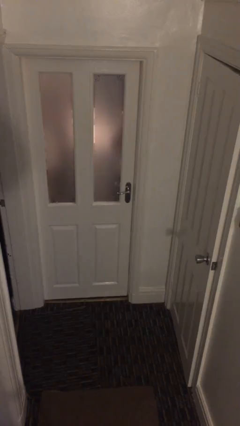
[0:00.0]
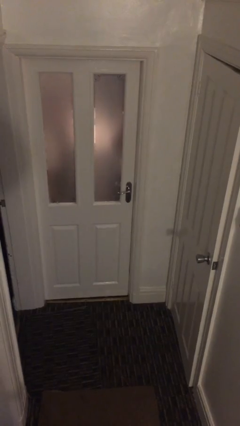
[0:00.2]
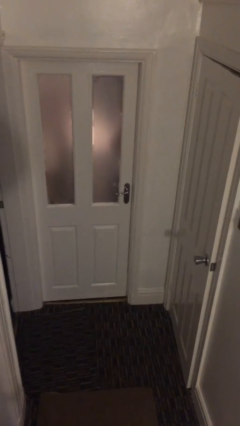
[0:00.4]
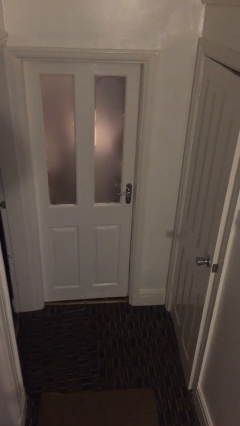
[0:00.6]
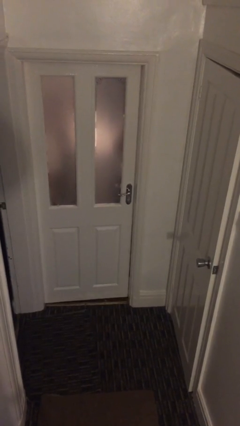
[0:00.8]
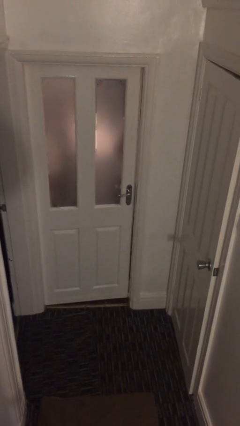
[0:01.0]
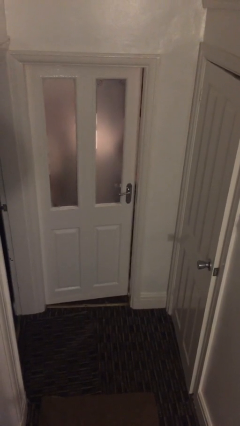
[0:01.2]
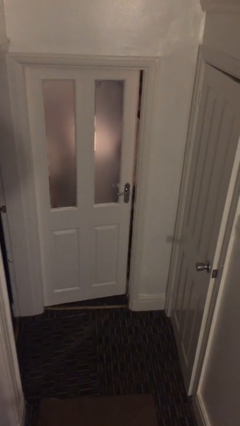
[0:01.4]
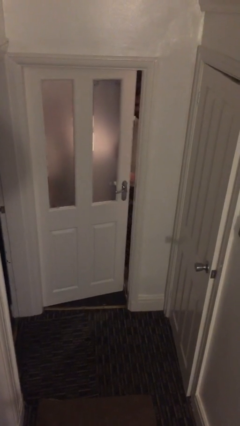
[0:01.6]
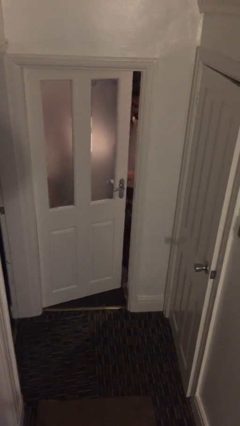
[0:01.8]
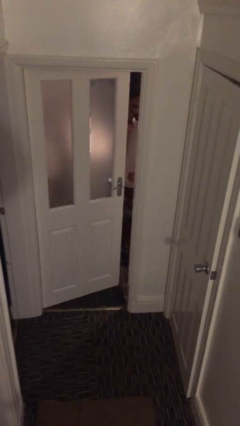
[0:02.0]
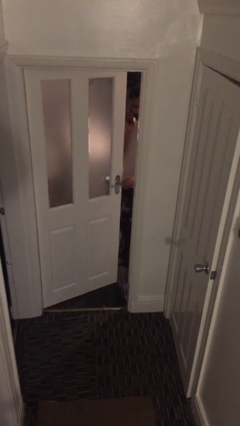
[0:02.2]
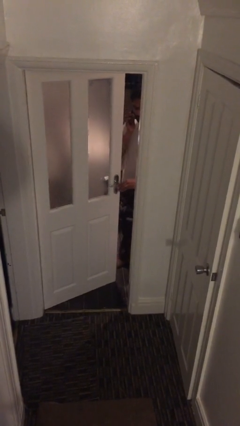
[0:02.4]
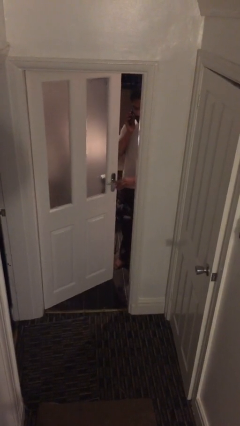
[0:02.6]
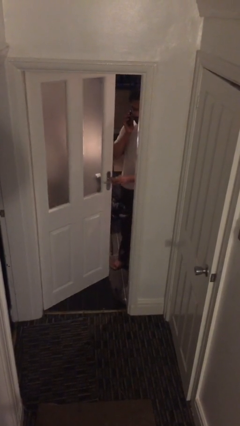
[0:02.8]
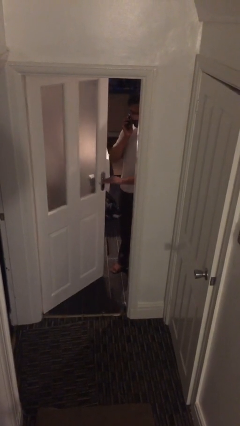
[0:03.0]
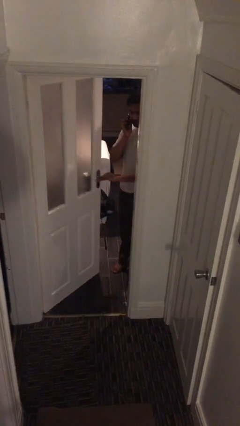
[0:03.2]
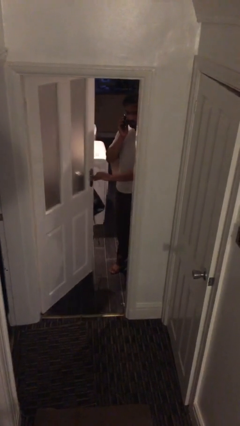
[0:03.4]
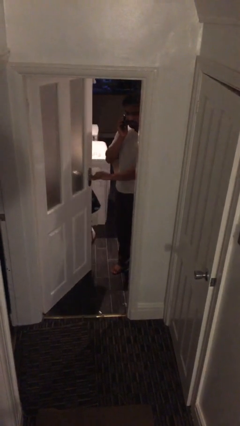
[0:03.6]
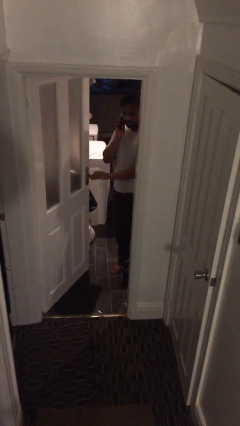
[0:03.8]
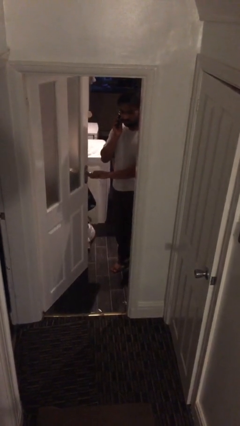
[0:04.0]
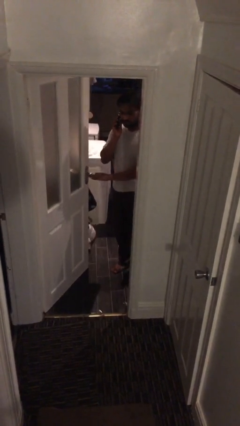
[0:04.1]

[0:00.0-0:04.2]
person opens facility door

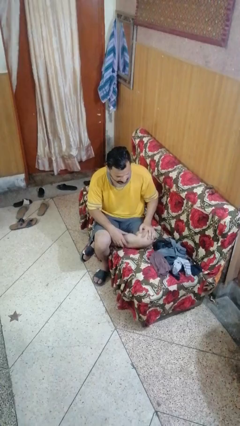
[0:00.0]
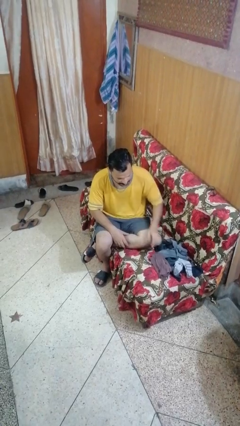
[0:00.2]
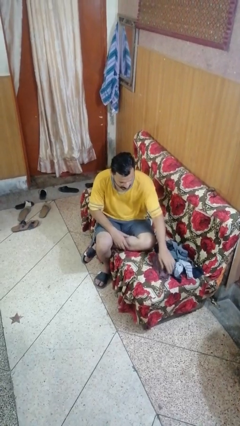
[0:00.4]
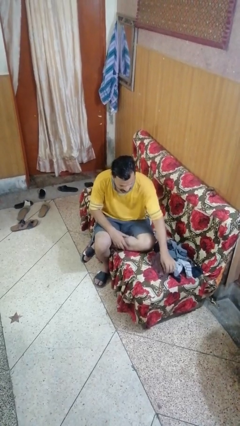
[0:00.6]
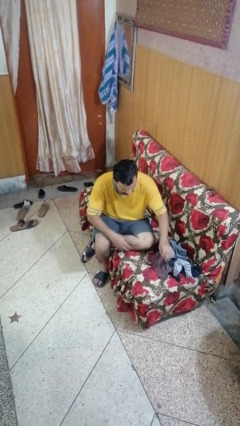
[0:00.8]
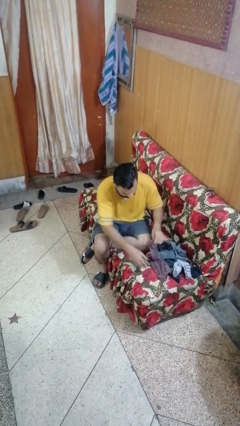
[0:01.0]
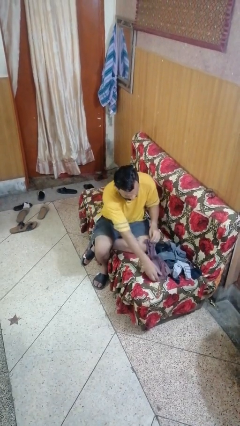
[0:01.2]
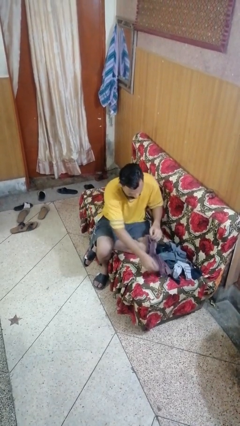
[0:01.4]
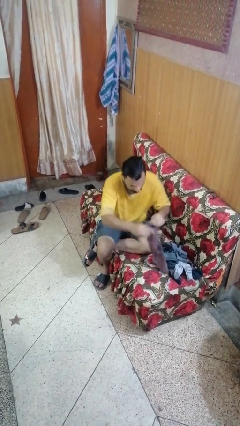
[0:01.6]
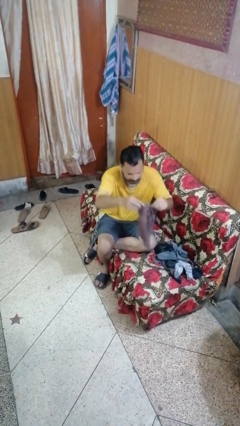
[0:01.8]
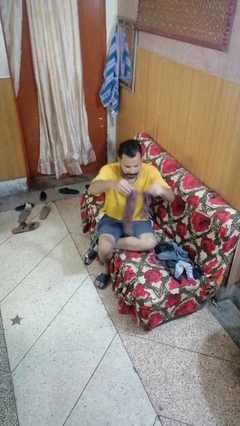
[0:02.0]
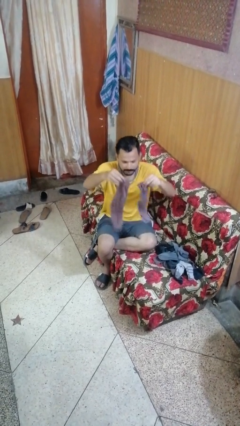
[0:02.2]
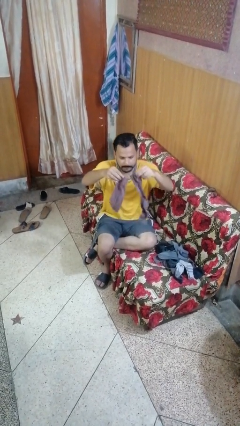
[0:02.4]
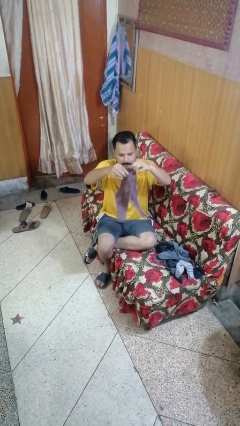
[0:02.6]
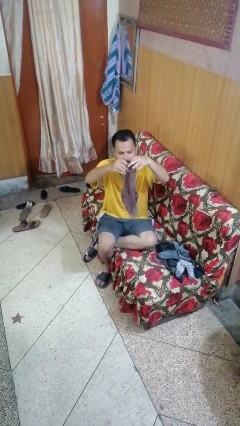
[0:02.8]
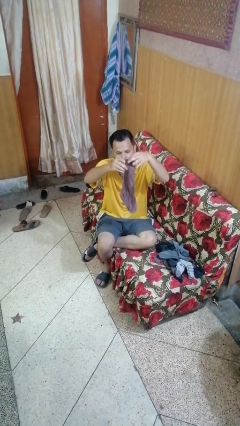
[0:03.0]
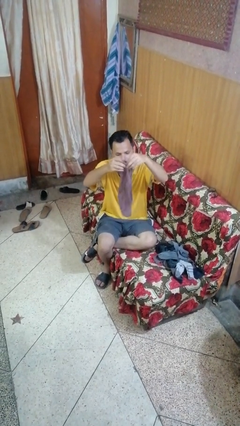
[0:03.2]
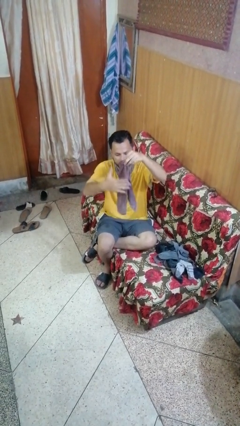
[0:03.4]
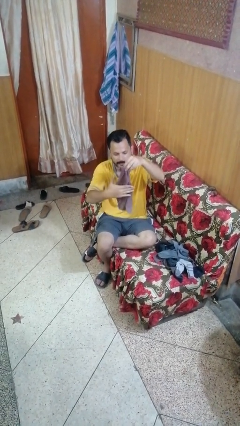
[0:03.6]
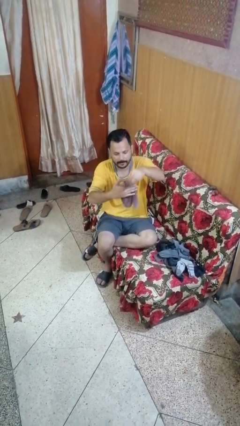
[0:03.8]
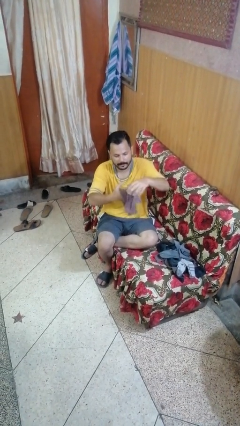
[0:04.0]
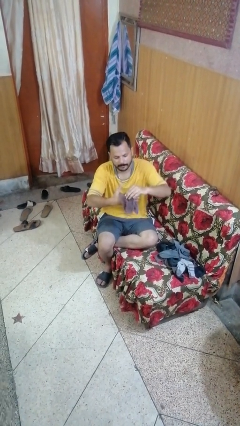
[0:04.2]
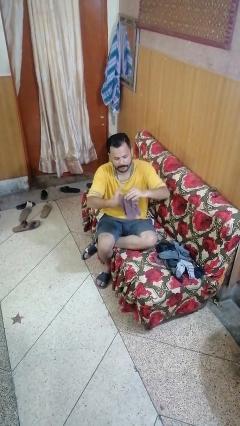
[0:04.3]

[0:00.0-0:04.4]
person folds socks

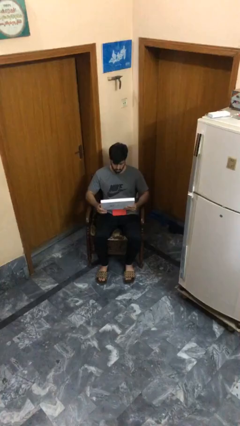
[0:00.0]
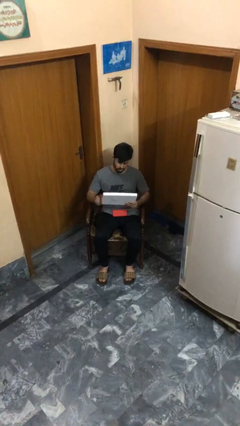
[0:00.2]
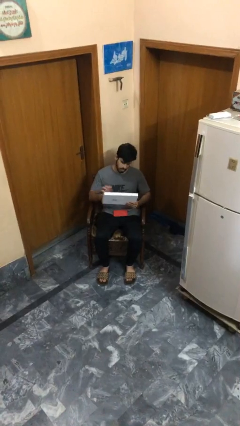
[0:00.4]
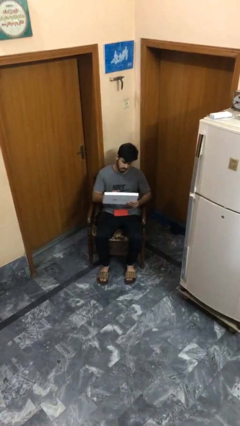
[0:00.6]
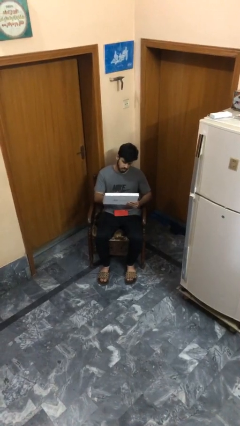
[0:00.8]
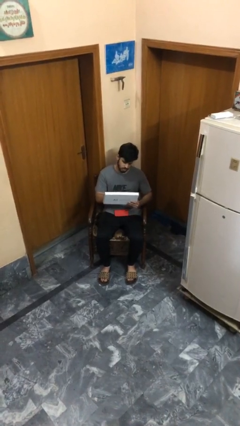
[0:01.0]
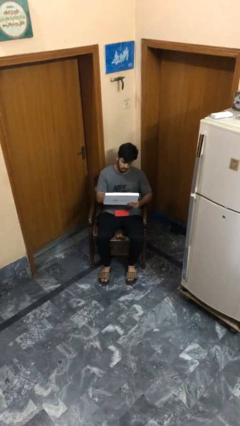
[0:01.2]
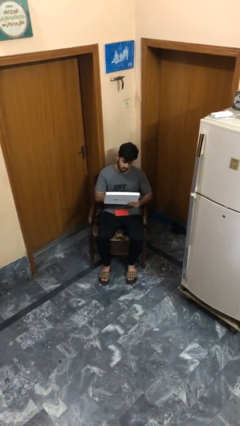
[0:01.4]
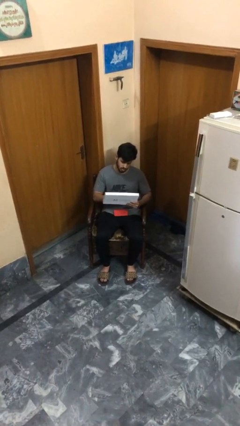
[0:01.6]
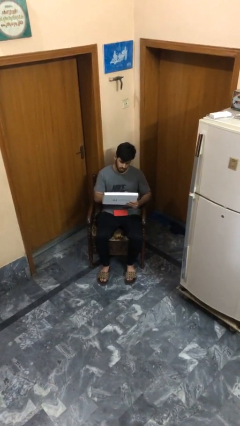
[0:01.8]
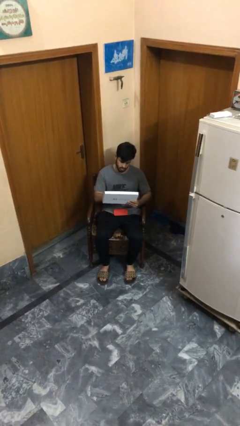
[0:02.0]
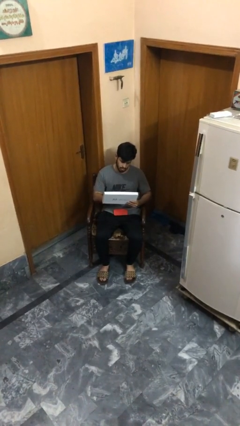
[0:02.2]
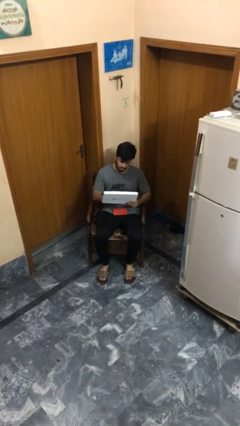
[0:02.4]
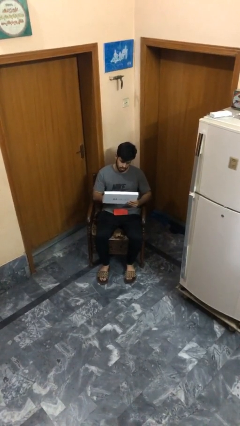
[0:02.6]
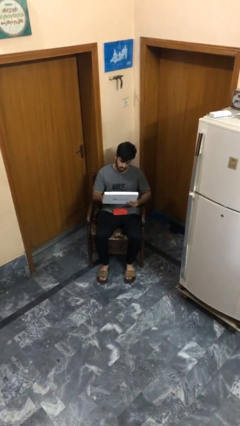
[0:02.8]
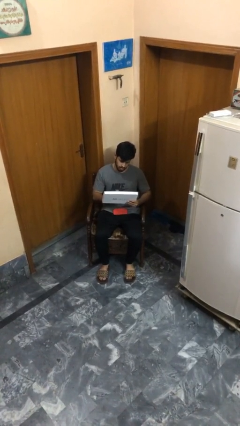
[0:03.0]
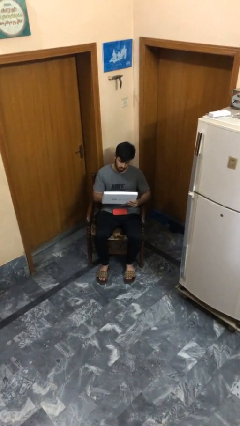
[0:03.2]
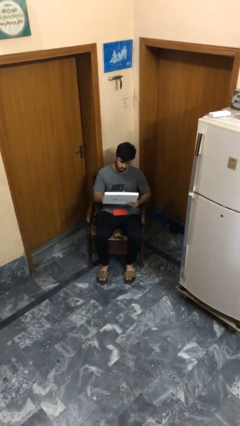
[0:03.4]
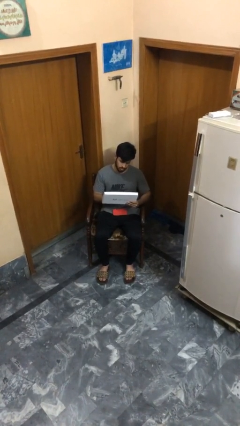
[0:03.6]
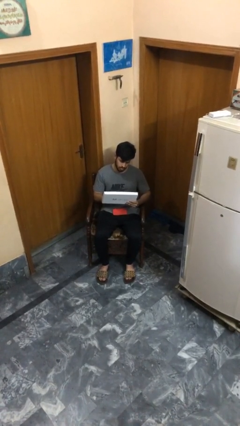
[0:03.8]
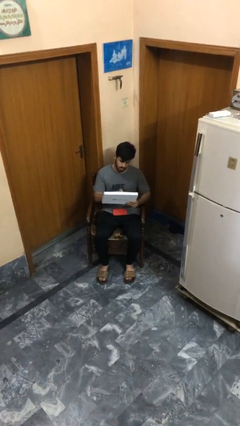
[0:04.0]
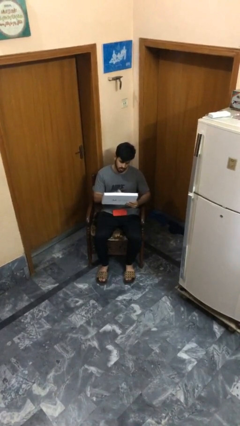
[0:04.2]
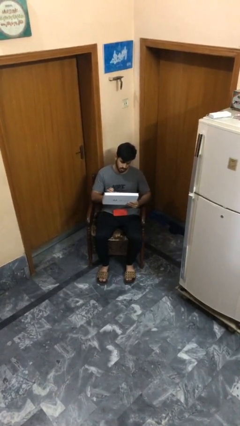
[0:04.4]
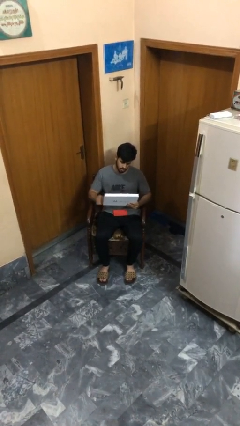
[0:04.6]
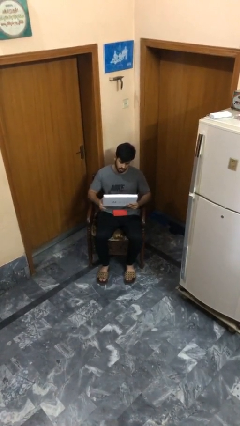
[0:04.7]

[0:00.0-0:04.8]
person interacts with tablet

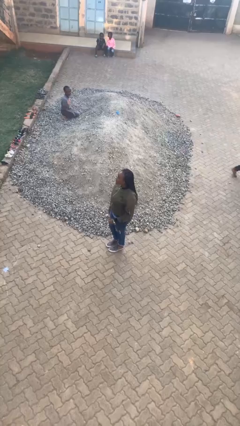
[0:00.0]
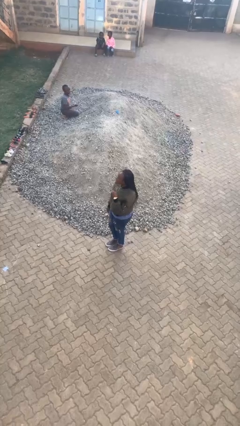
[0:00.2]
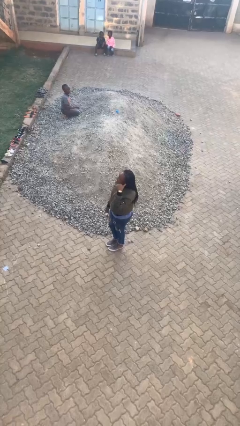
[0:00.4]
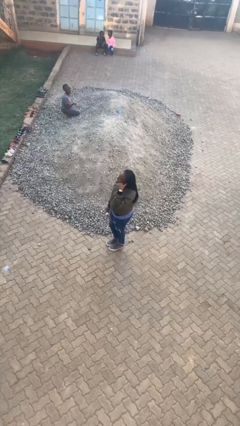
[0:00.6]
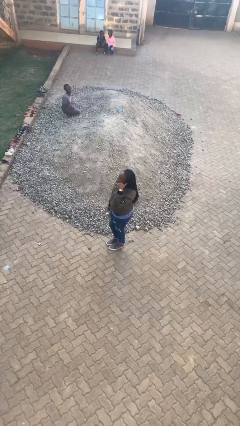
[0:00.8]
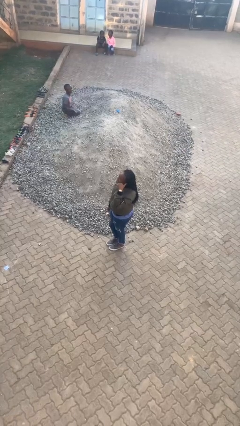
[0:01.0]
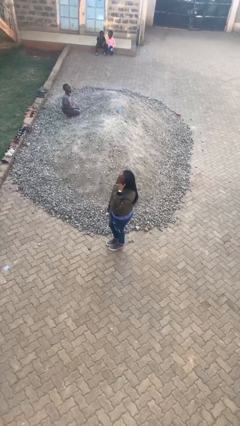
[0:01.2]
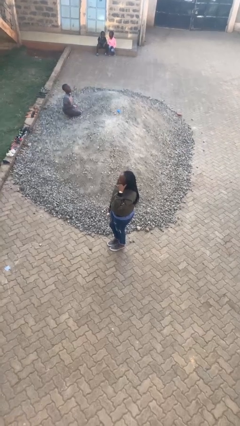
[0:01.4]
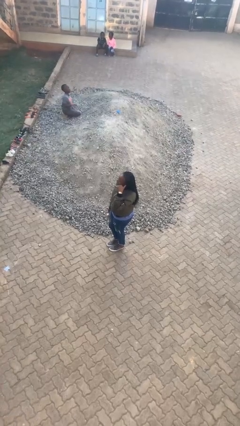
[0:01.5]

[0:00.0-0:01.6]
person gestures call me

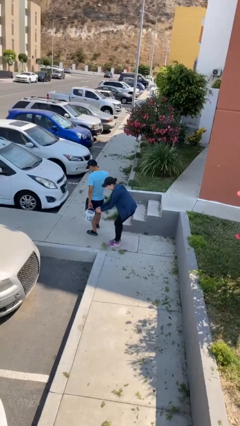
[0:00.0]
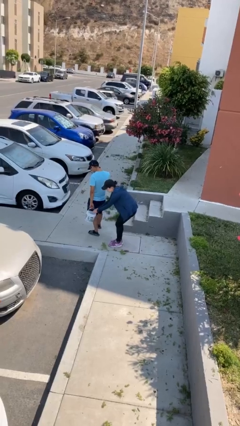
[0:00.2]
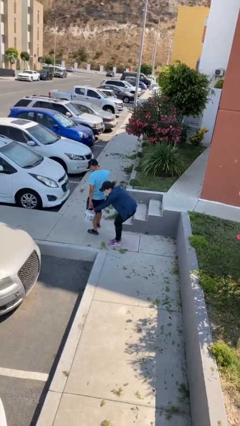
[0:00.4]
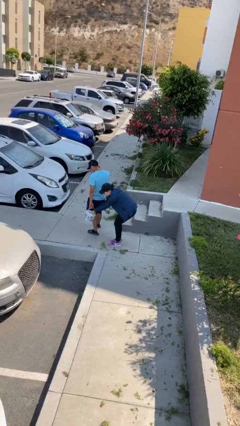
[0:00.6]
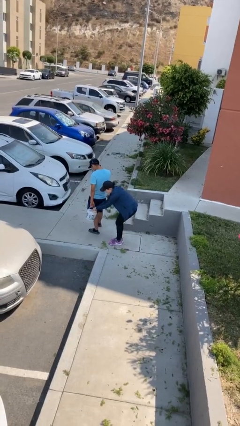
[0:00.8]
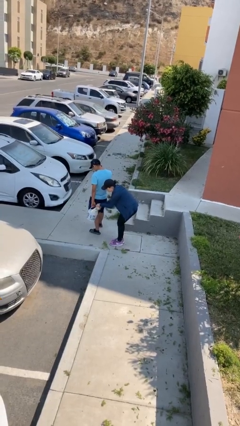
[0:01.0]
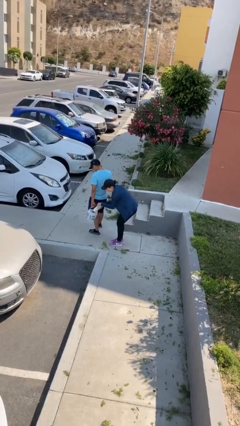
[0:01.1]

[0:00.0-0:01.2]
person steals object from person

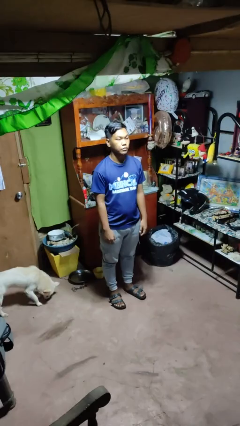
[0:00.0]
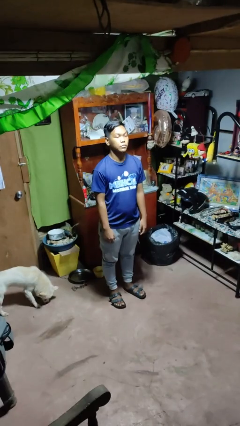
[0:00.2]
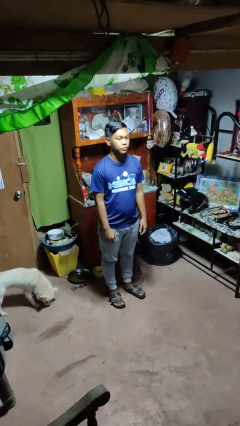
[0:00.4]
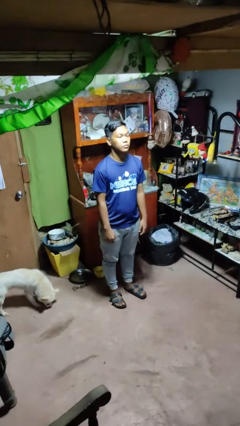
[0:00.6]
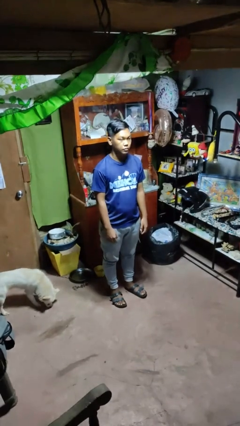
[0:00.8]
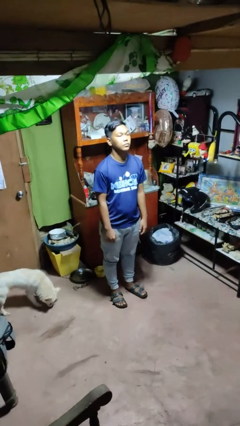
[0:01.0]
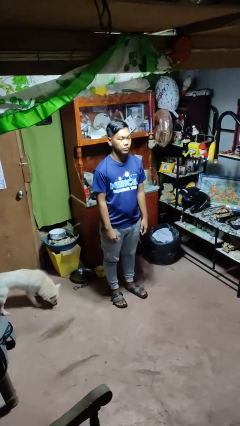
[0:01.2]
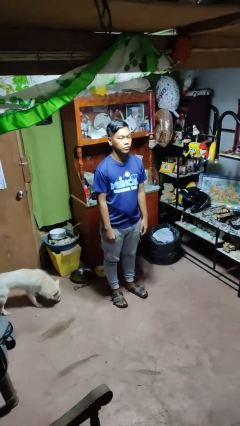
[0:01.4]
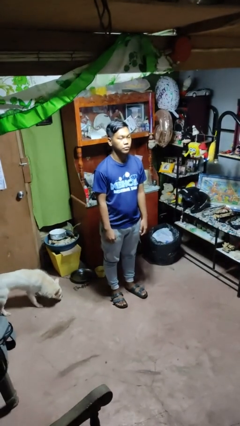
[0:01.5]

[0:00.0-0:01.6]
person nods head
